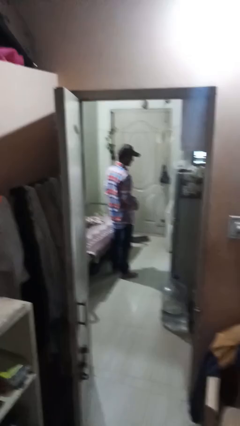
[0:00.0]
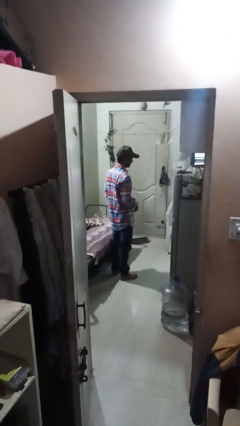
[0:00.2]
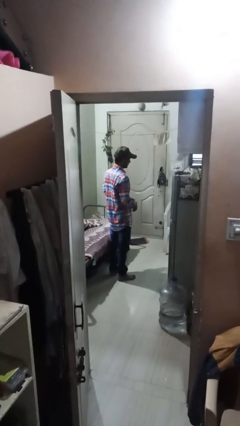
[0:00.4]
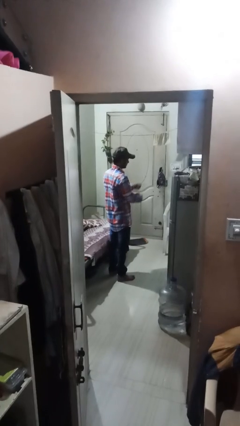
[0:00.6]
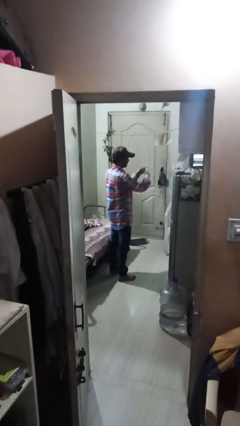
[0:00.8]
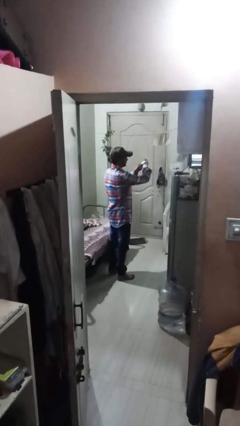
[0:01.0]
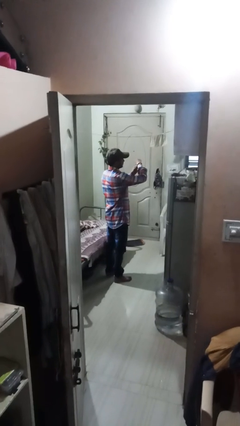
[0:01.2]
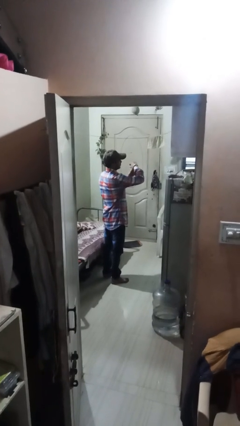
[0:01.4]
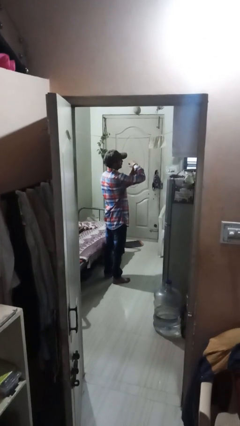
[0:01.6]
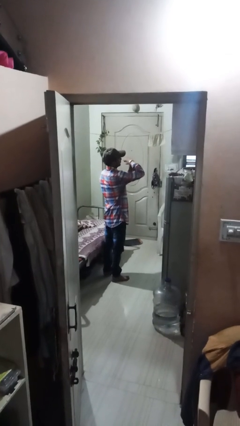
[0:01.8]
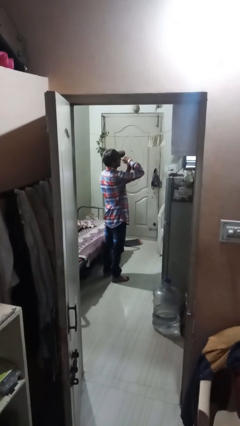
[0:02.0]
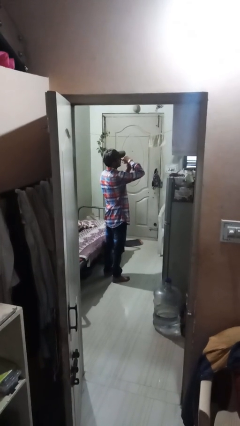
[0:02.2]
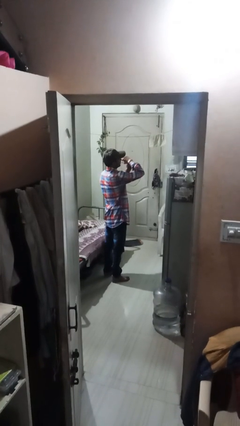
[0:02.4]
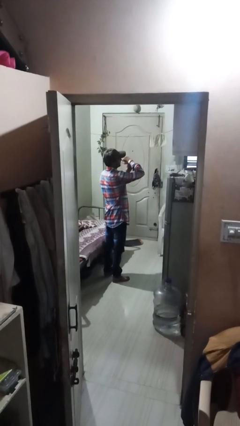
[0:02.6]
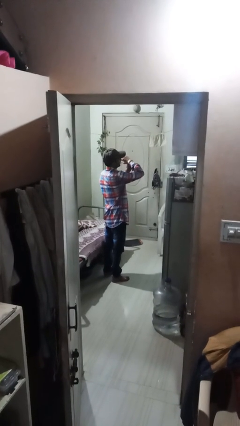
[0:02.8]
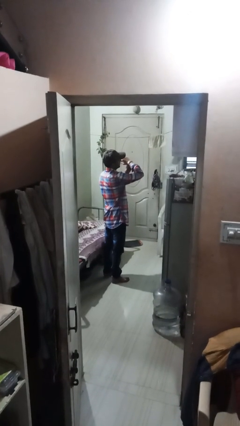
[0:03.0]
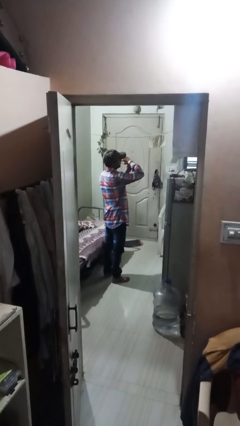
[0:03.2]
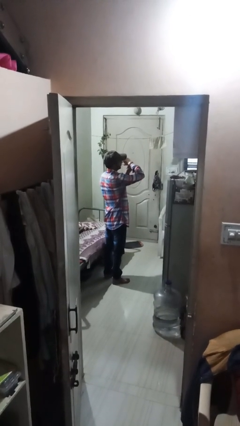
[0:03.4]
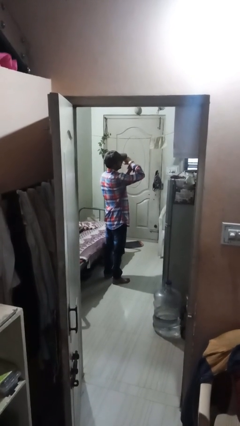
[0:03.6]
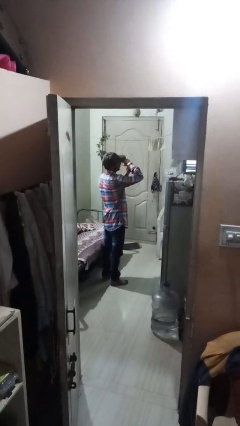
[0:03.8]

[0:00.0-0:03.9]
person puts on wristwatch

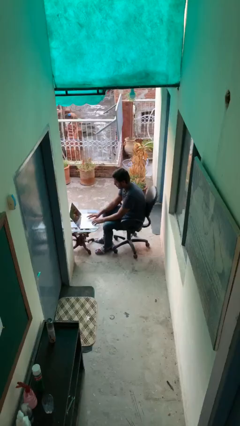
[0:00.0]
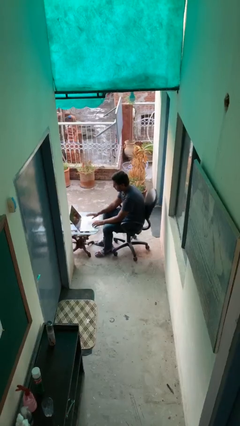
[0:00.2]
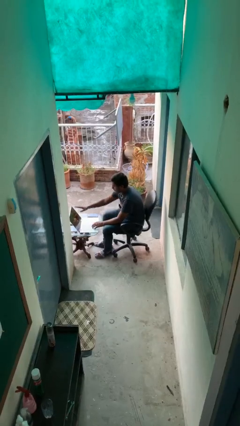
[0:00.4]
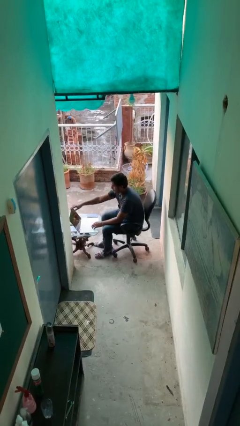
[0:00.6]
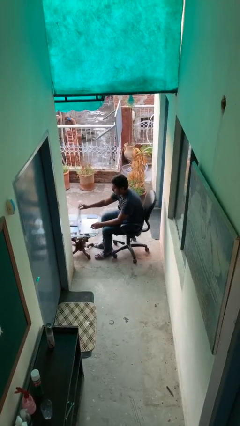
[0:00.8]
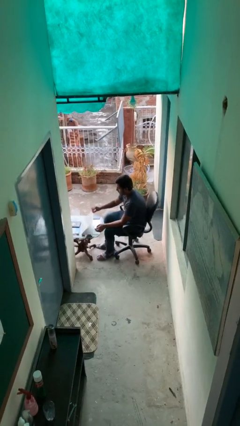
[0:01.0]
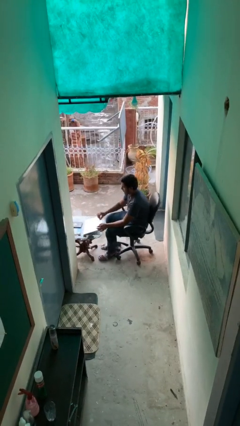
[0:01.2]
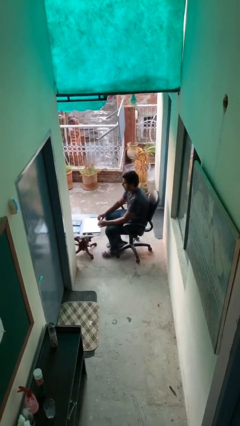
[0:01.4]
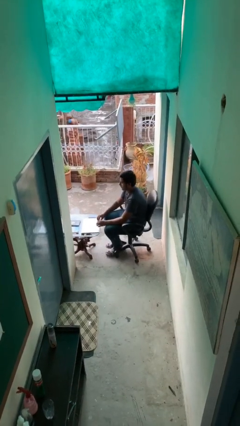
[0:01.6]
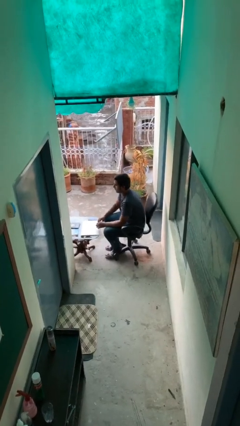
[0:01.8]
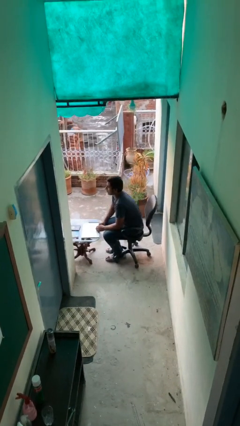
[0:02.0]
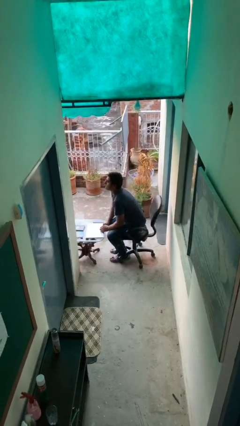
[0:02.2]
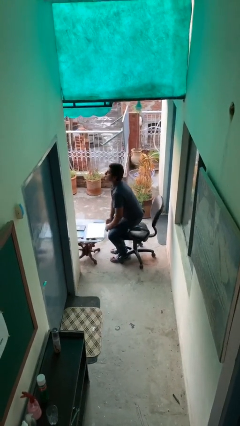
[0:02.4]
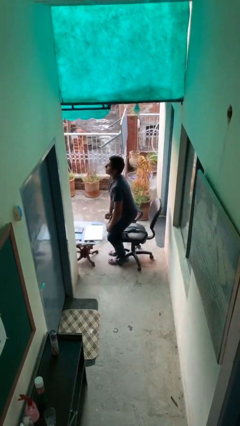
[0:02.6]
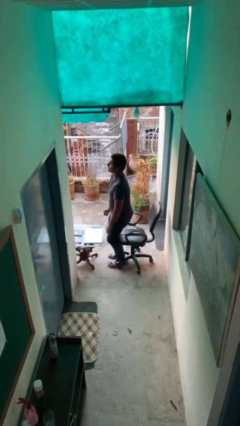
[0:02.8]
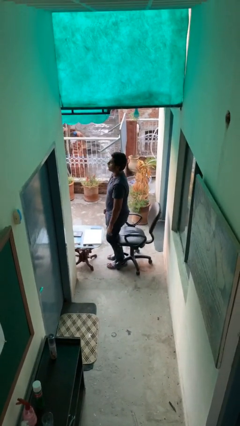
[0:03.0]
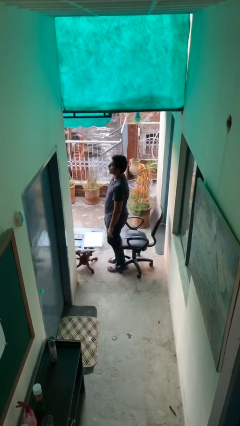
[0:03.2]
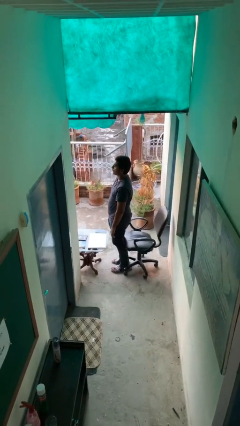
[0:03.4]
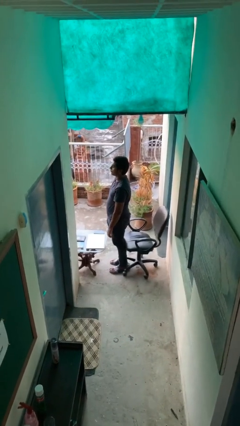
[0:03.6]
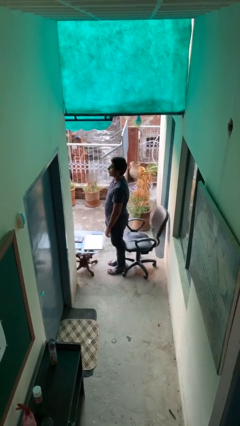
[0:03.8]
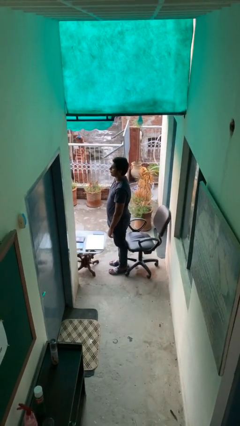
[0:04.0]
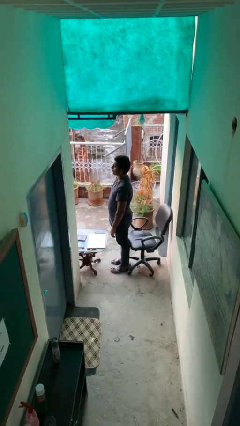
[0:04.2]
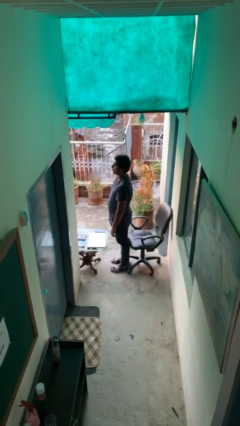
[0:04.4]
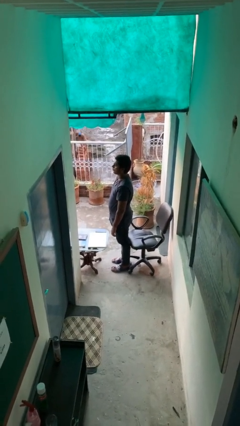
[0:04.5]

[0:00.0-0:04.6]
person stands up

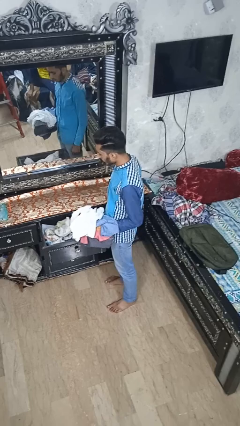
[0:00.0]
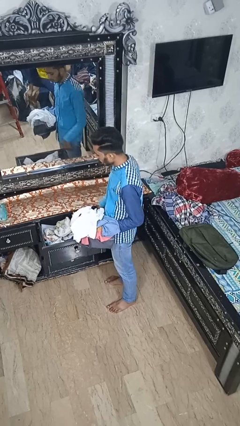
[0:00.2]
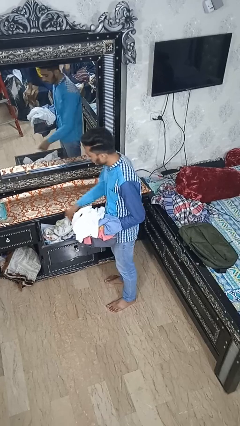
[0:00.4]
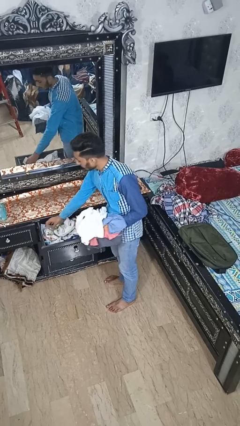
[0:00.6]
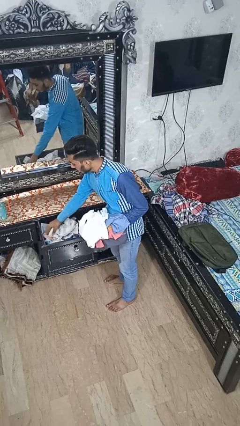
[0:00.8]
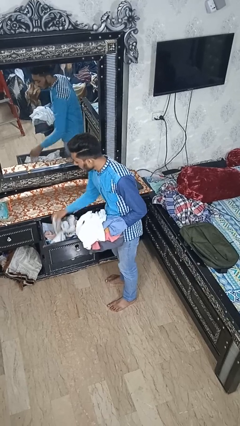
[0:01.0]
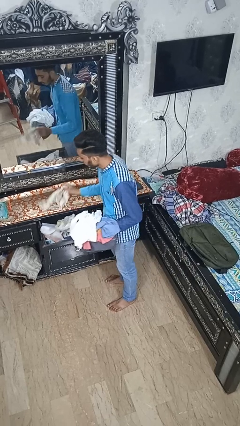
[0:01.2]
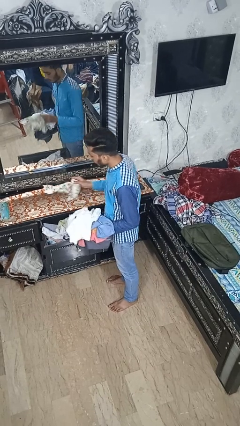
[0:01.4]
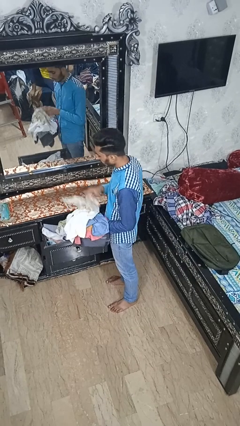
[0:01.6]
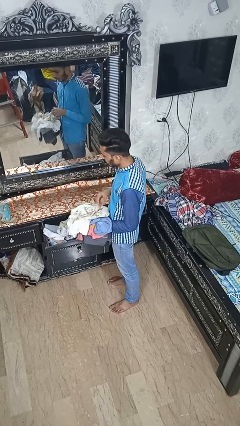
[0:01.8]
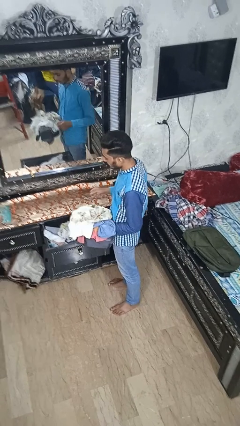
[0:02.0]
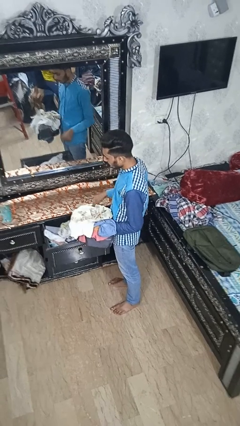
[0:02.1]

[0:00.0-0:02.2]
person takes clothes from dresser

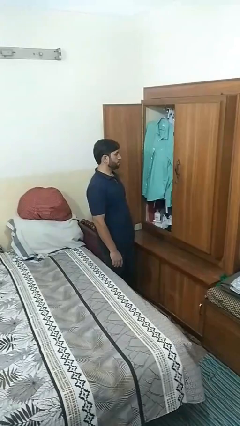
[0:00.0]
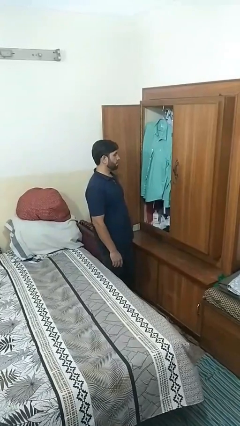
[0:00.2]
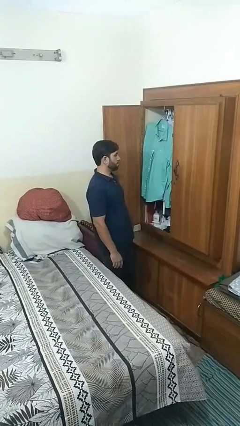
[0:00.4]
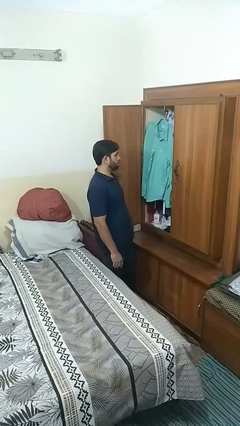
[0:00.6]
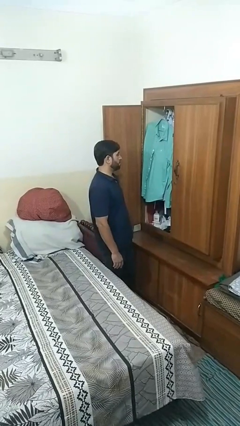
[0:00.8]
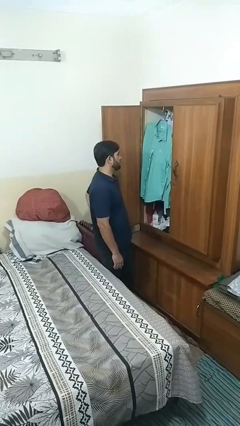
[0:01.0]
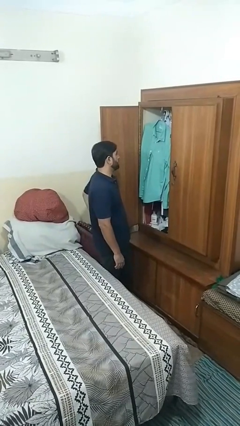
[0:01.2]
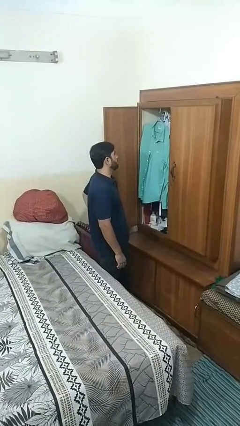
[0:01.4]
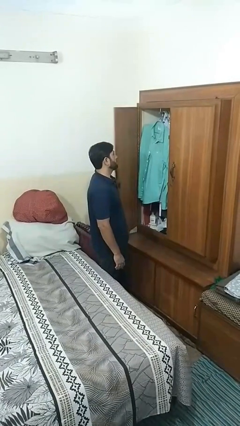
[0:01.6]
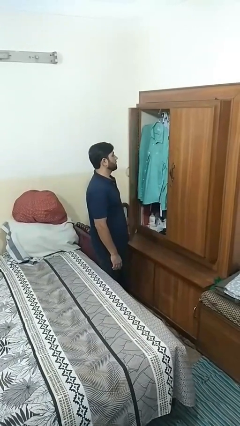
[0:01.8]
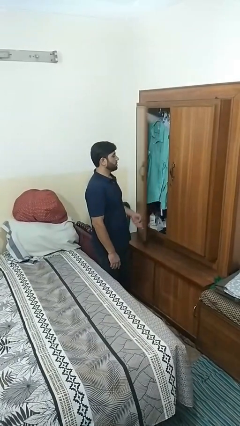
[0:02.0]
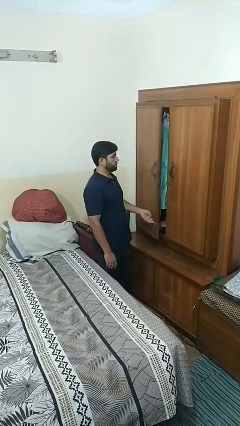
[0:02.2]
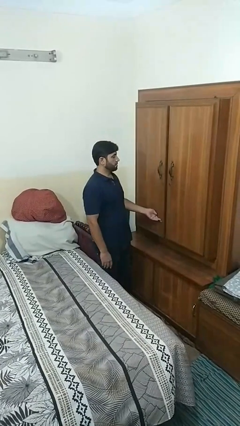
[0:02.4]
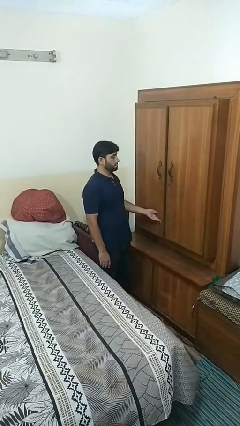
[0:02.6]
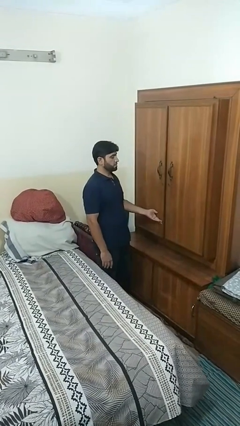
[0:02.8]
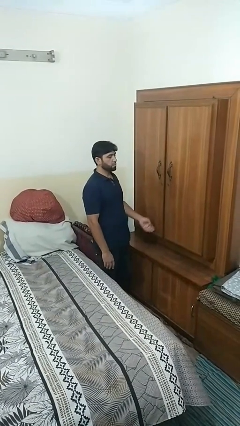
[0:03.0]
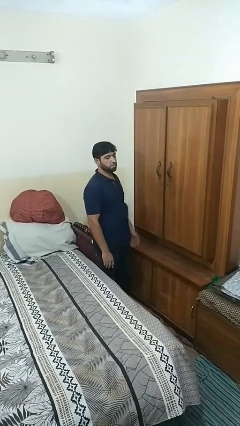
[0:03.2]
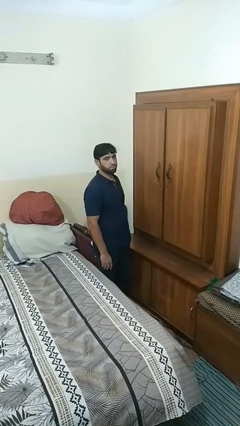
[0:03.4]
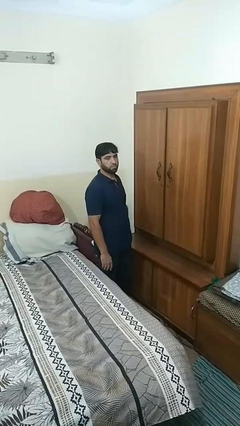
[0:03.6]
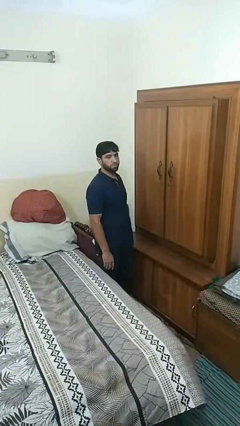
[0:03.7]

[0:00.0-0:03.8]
person closes closet door

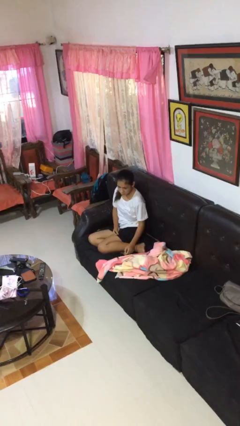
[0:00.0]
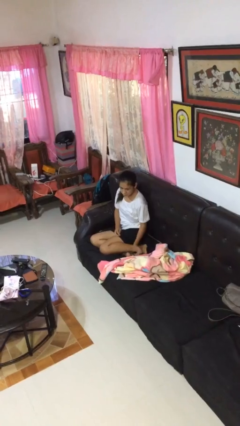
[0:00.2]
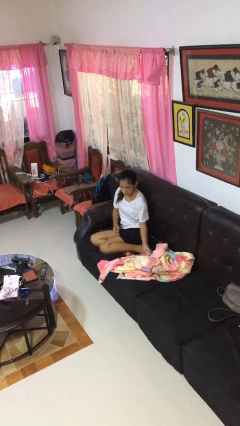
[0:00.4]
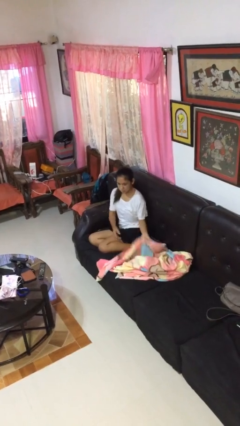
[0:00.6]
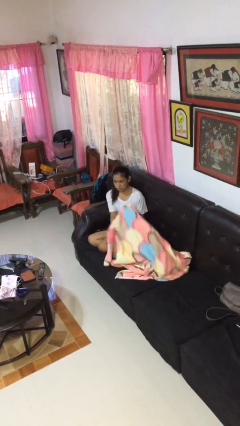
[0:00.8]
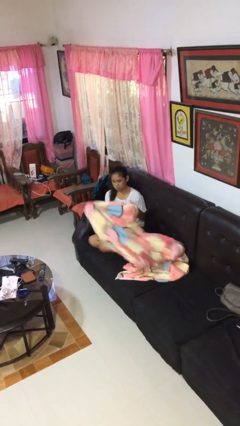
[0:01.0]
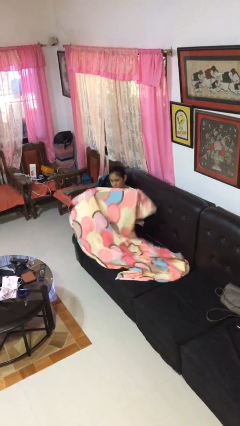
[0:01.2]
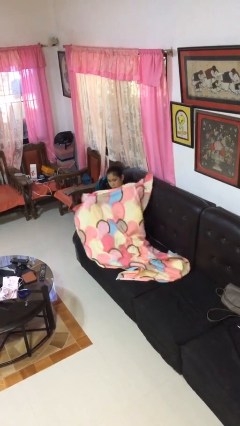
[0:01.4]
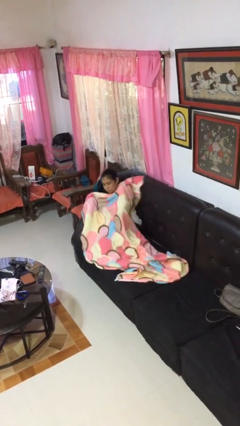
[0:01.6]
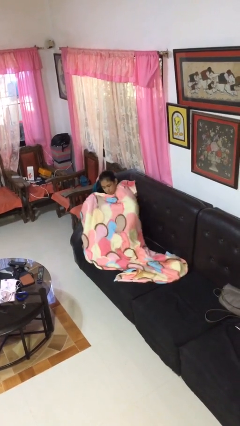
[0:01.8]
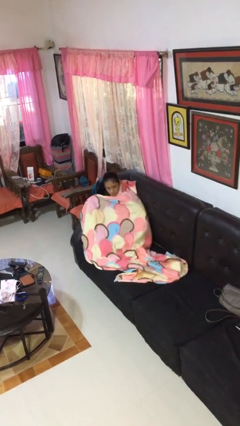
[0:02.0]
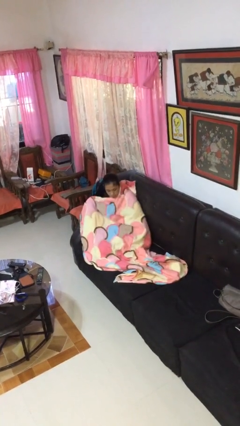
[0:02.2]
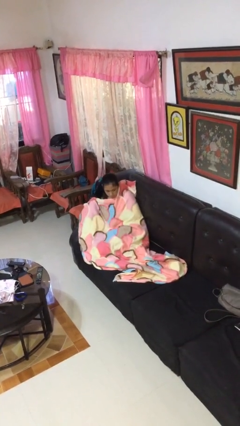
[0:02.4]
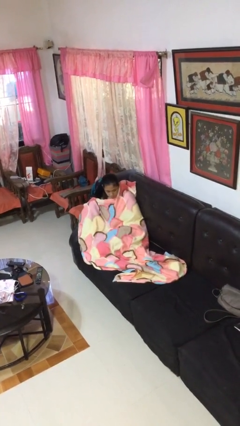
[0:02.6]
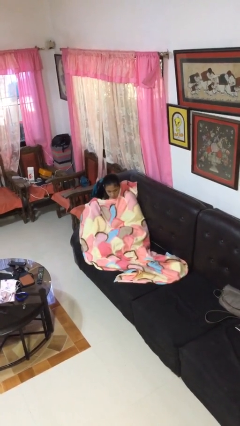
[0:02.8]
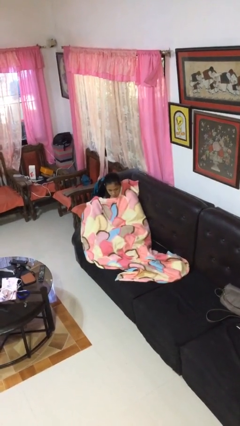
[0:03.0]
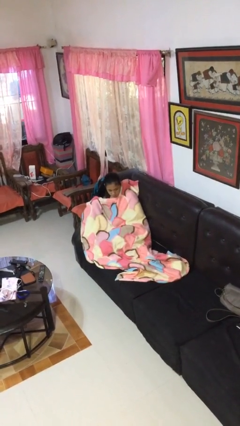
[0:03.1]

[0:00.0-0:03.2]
person covers with blanket
